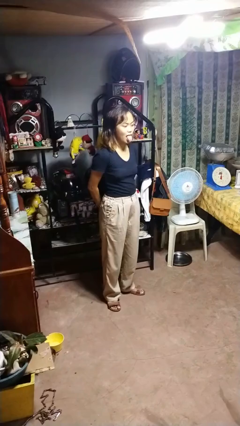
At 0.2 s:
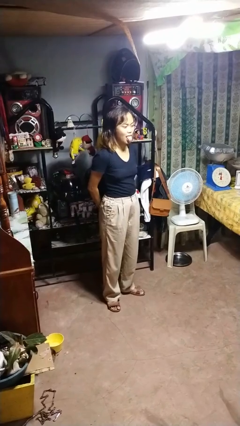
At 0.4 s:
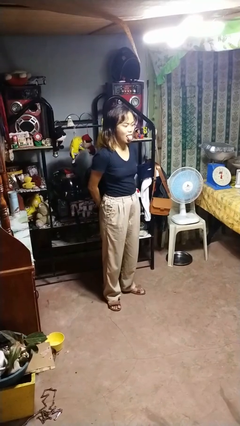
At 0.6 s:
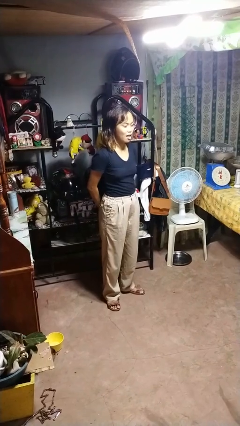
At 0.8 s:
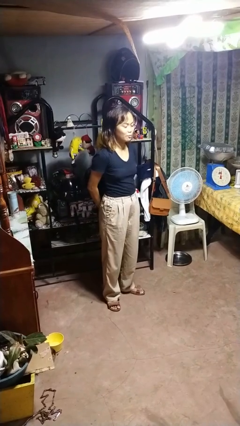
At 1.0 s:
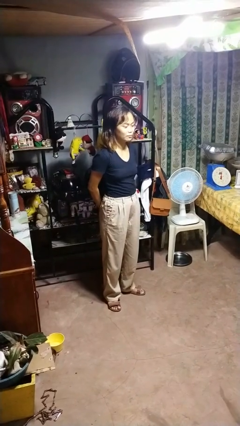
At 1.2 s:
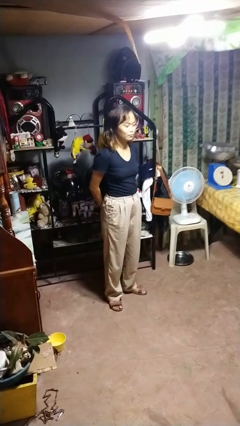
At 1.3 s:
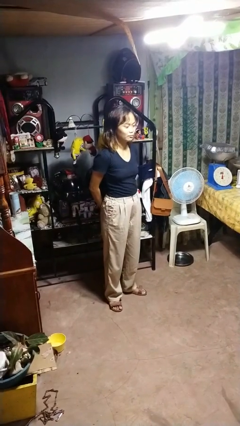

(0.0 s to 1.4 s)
person sticks out tongue

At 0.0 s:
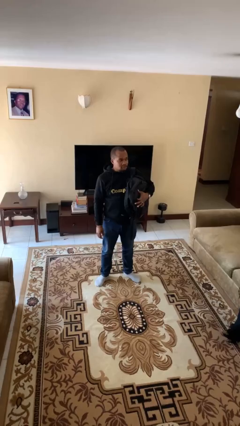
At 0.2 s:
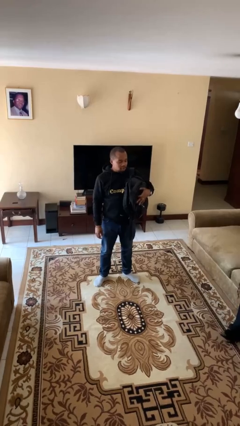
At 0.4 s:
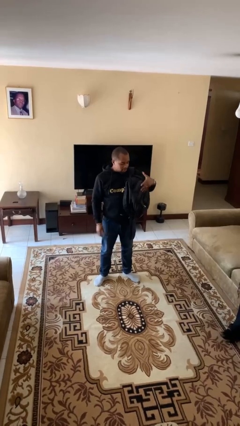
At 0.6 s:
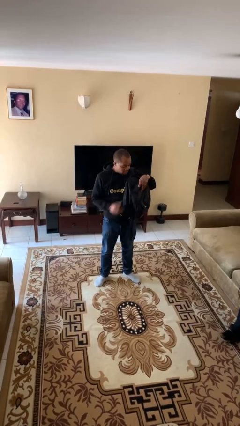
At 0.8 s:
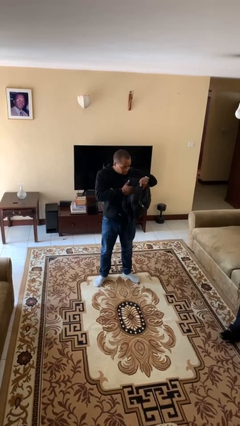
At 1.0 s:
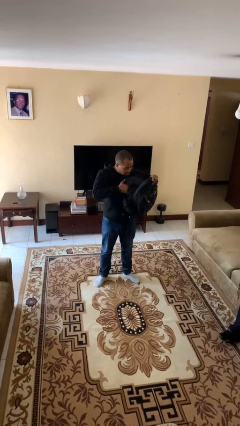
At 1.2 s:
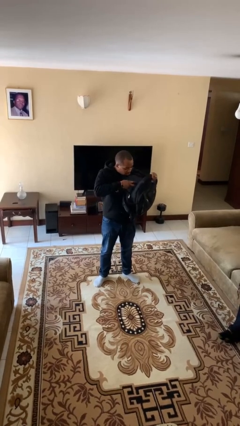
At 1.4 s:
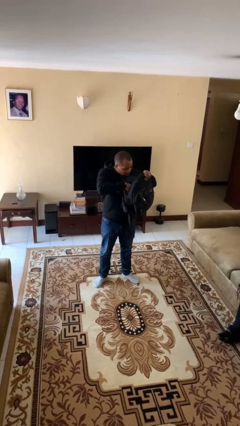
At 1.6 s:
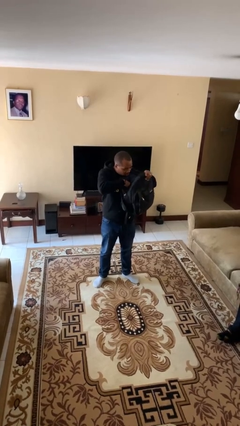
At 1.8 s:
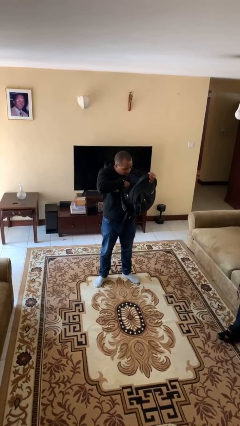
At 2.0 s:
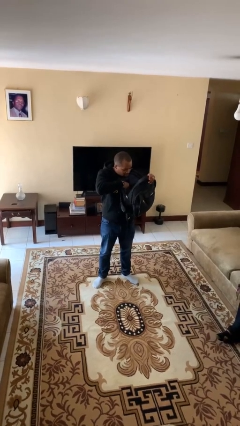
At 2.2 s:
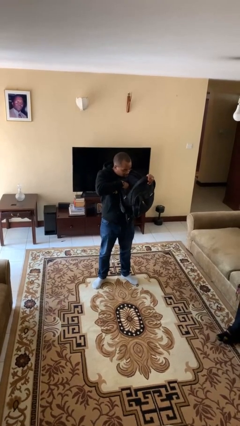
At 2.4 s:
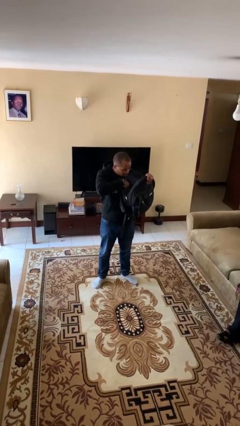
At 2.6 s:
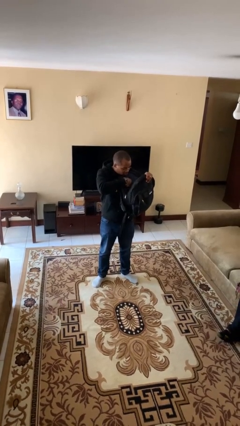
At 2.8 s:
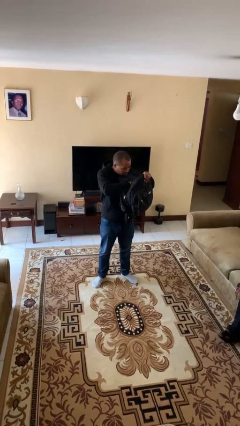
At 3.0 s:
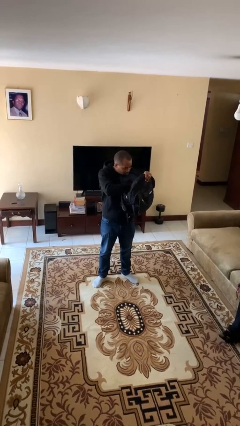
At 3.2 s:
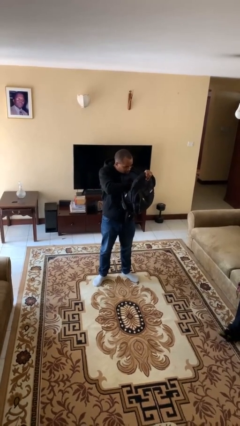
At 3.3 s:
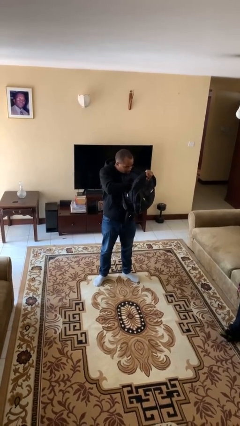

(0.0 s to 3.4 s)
person searches in backpack

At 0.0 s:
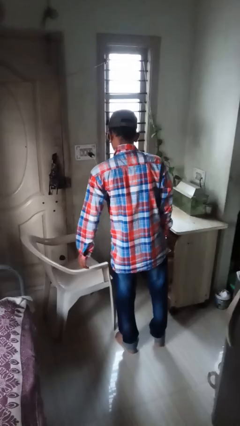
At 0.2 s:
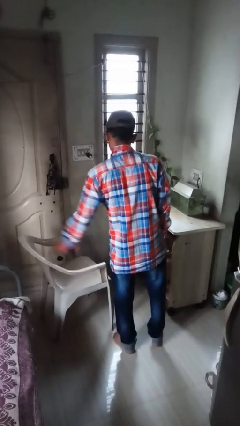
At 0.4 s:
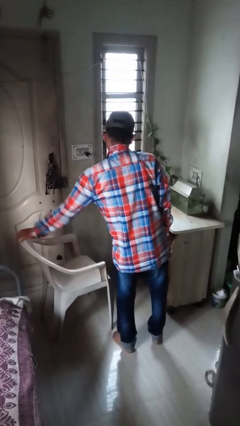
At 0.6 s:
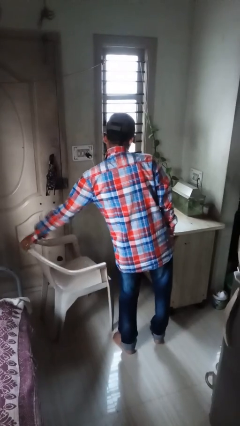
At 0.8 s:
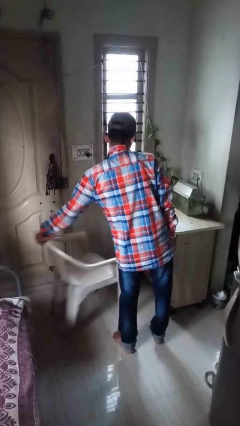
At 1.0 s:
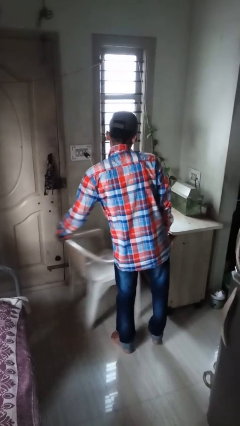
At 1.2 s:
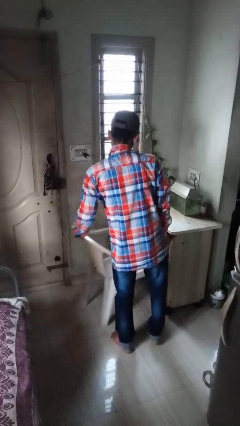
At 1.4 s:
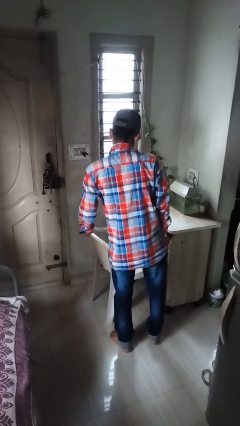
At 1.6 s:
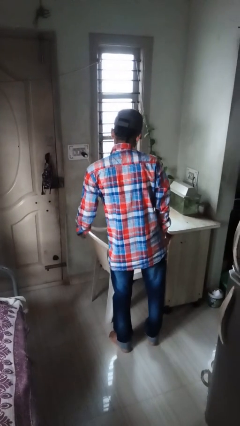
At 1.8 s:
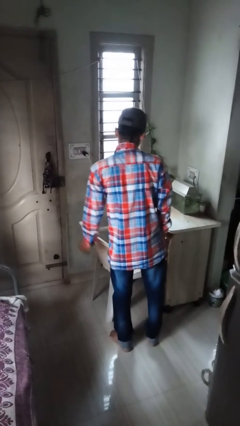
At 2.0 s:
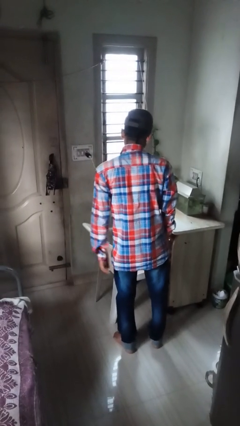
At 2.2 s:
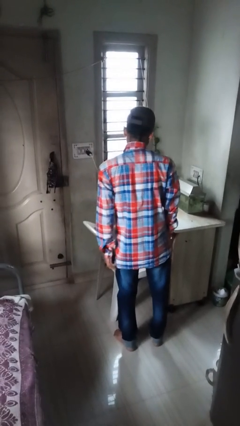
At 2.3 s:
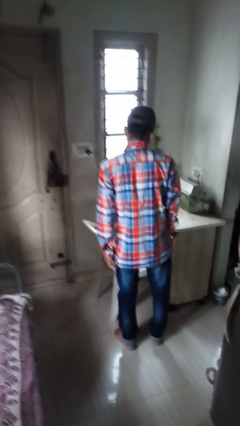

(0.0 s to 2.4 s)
person pushes in chair

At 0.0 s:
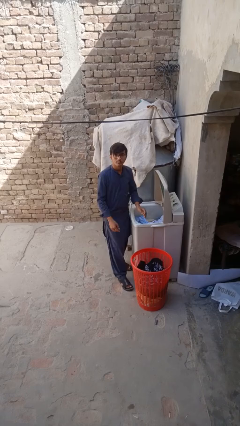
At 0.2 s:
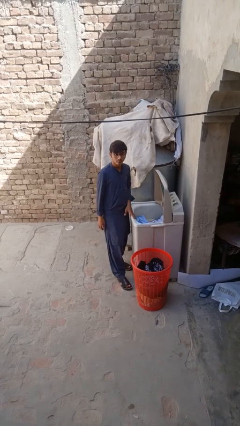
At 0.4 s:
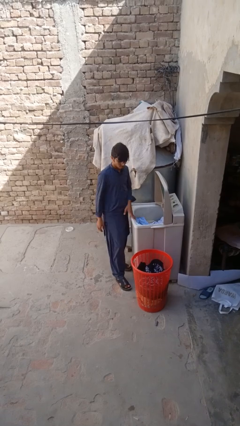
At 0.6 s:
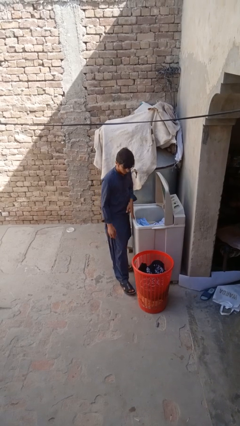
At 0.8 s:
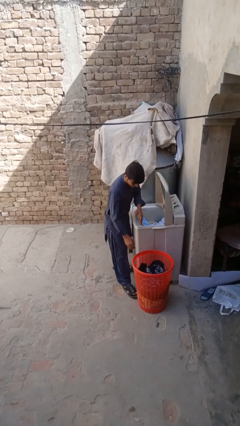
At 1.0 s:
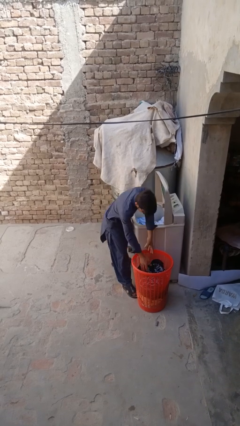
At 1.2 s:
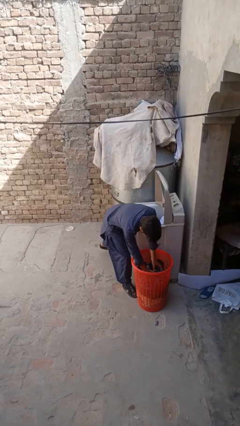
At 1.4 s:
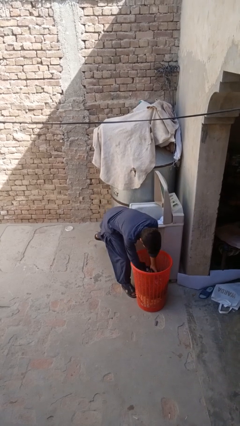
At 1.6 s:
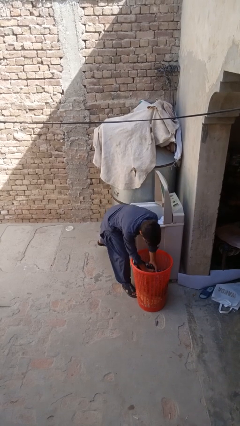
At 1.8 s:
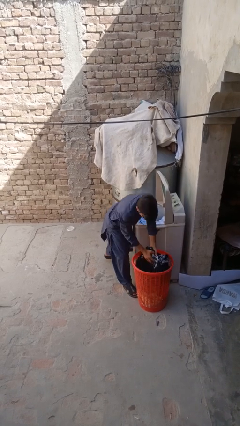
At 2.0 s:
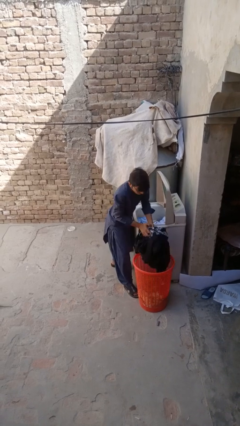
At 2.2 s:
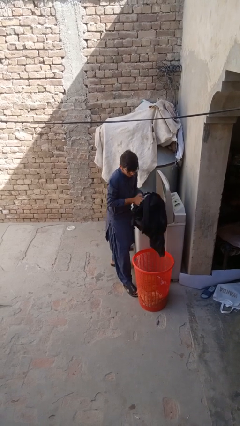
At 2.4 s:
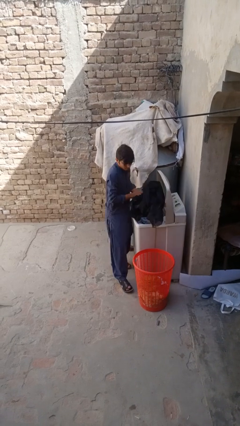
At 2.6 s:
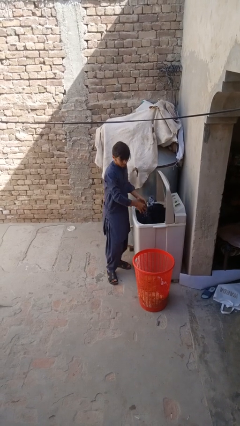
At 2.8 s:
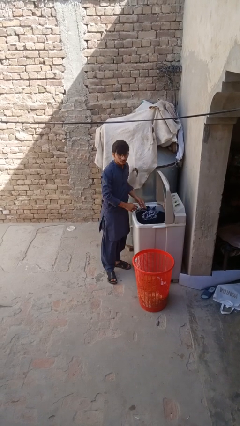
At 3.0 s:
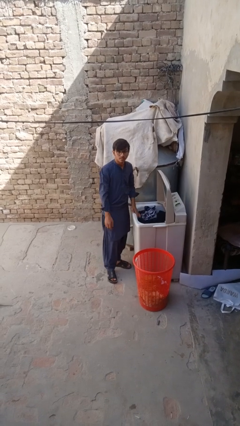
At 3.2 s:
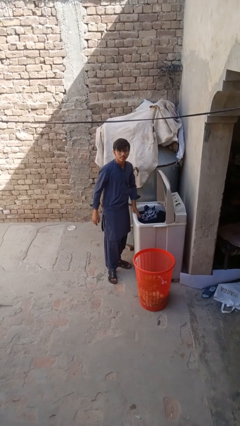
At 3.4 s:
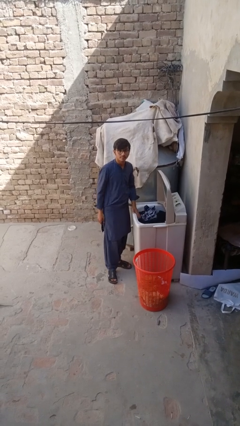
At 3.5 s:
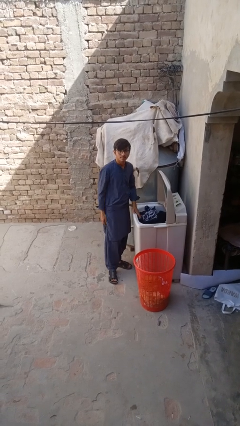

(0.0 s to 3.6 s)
person loads clotheswasher

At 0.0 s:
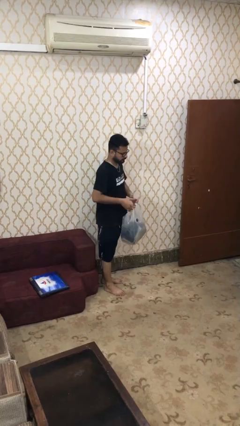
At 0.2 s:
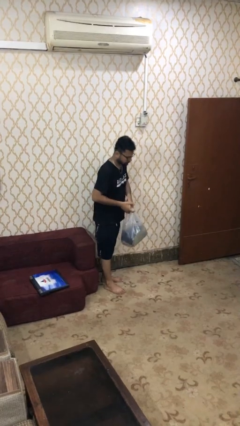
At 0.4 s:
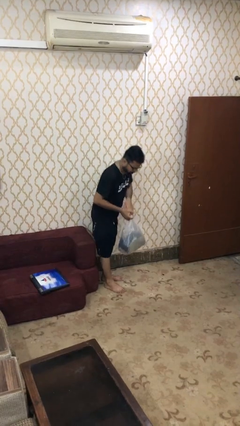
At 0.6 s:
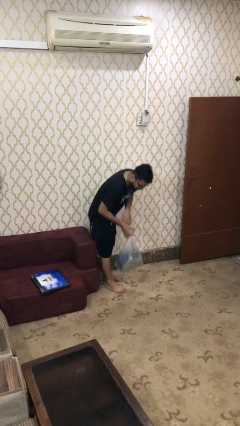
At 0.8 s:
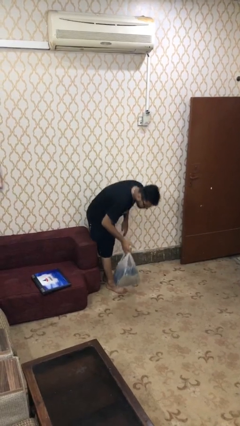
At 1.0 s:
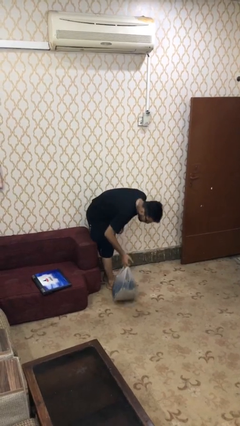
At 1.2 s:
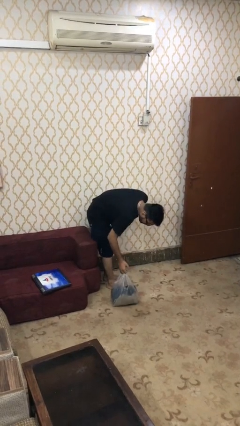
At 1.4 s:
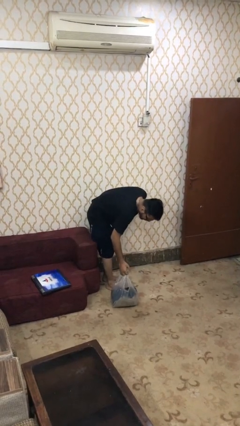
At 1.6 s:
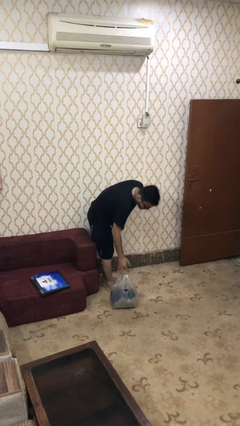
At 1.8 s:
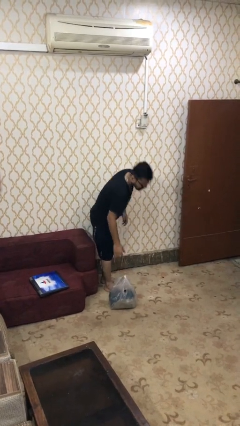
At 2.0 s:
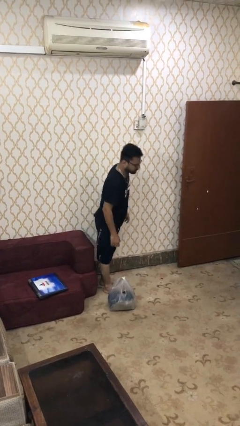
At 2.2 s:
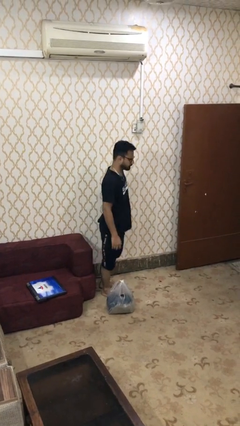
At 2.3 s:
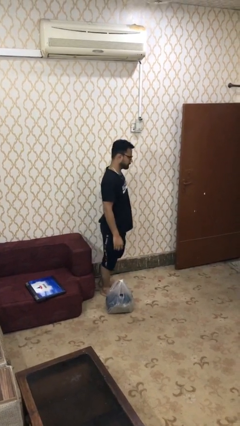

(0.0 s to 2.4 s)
person puts down object on floor

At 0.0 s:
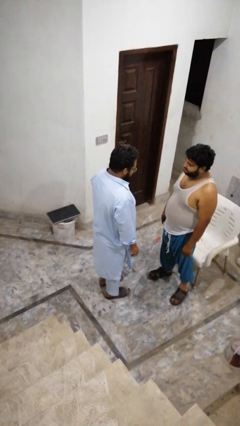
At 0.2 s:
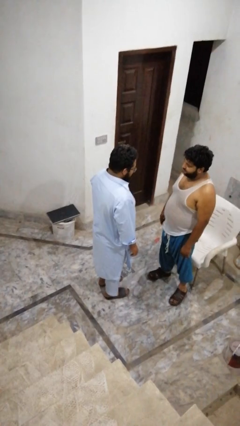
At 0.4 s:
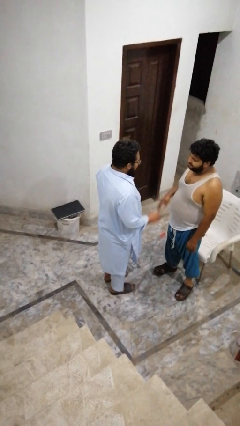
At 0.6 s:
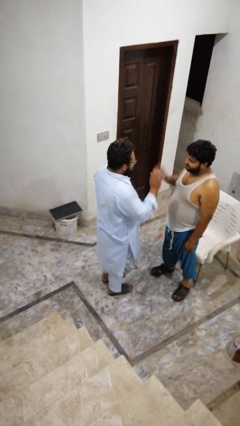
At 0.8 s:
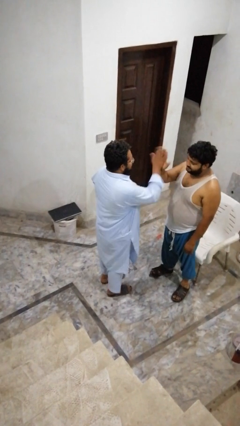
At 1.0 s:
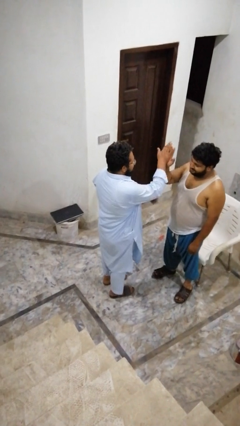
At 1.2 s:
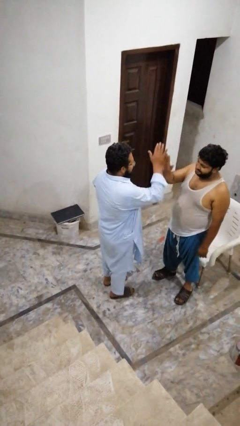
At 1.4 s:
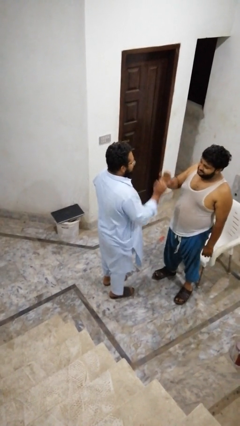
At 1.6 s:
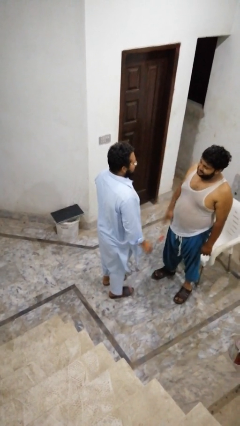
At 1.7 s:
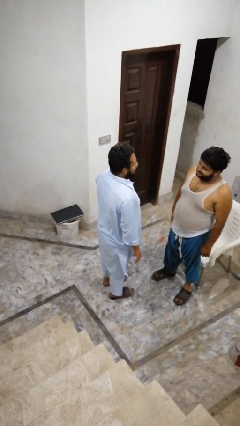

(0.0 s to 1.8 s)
person highfives hand

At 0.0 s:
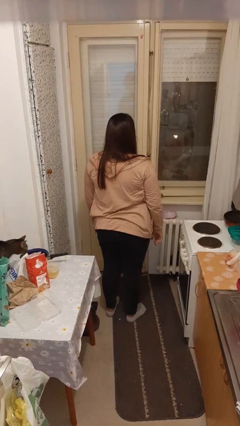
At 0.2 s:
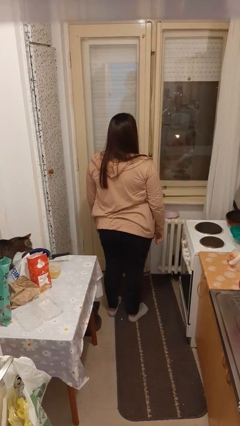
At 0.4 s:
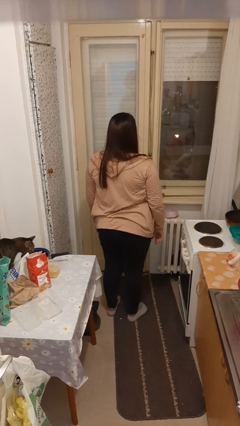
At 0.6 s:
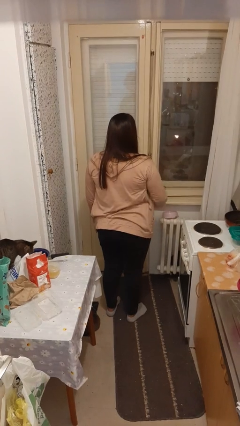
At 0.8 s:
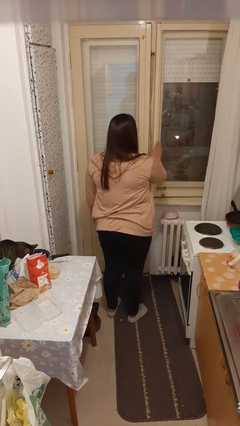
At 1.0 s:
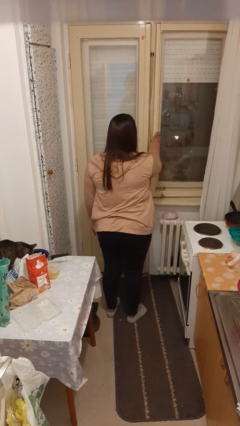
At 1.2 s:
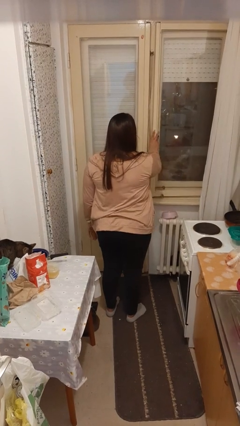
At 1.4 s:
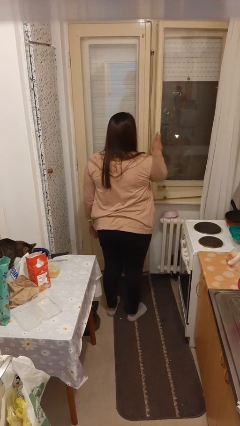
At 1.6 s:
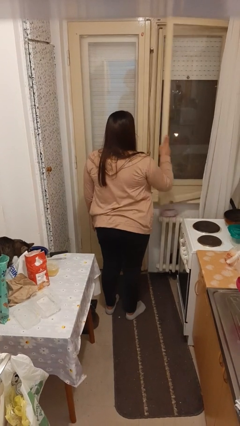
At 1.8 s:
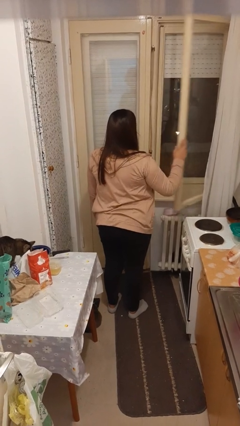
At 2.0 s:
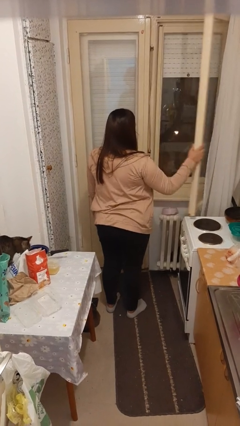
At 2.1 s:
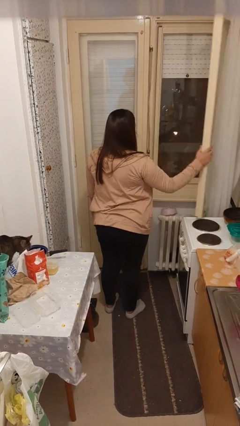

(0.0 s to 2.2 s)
person opens home window

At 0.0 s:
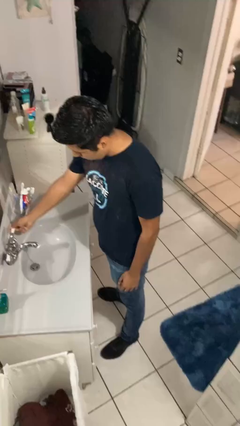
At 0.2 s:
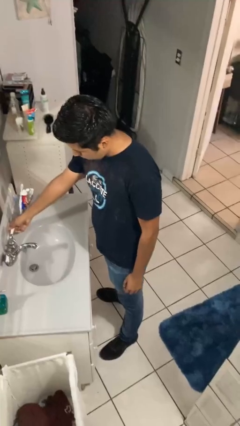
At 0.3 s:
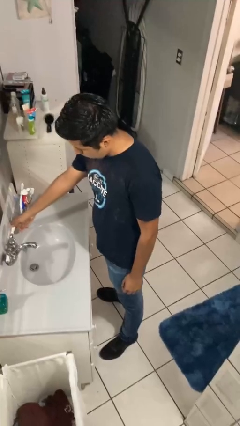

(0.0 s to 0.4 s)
person turns off faucet
